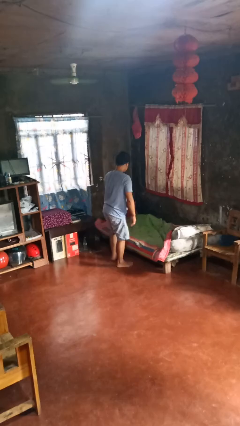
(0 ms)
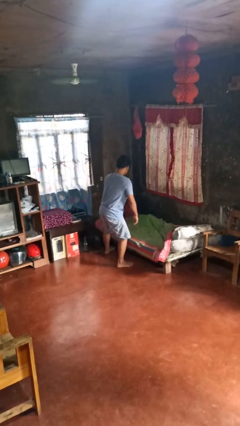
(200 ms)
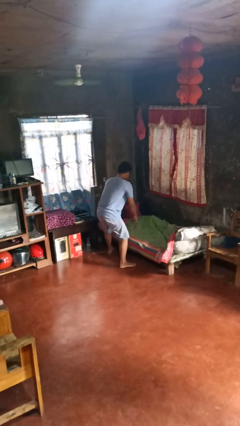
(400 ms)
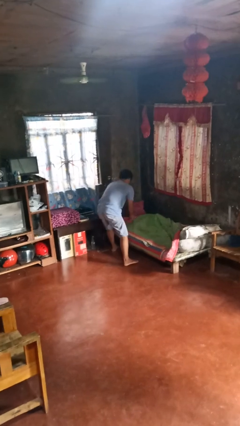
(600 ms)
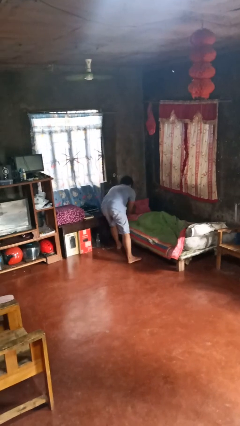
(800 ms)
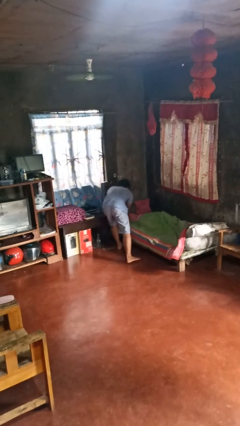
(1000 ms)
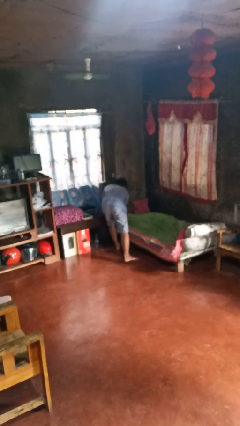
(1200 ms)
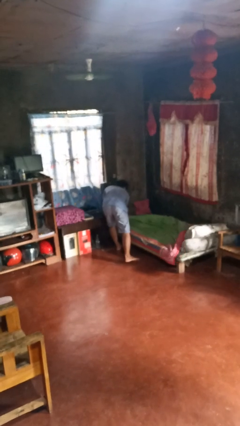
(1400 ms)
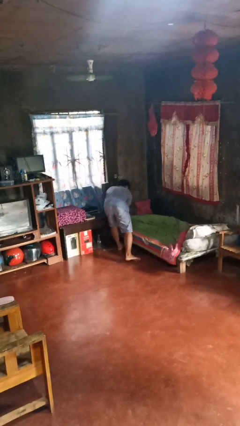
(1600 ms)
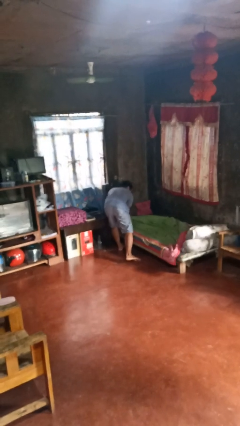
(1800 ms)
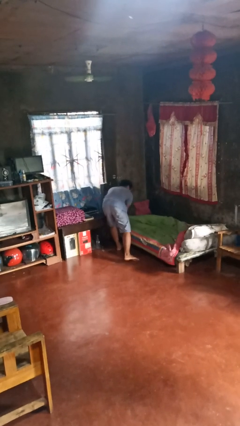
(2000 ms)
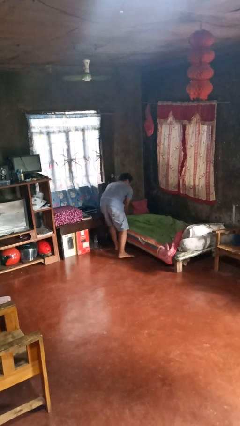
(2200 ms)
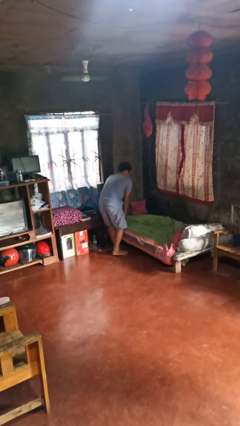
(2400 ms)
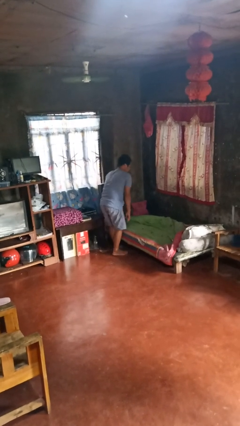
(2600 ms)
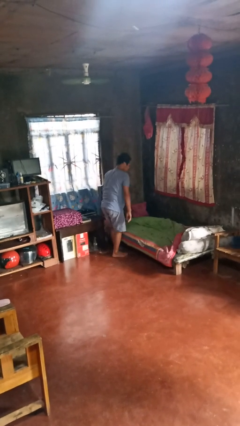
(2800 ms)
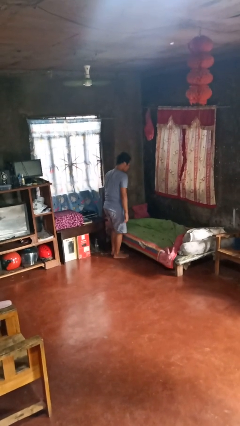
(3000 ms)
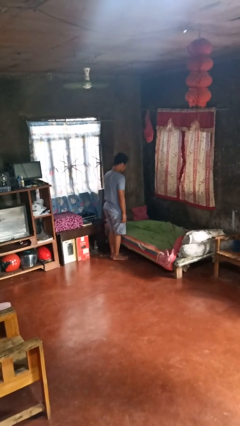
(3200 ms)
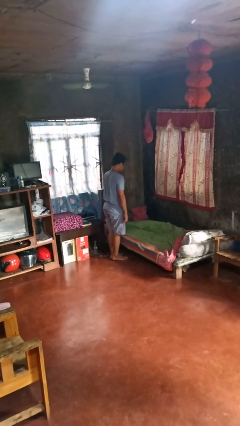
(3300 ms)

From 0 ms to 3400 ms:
person makes bed

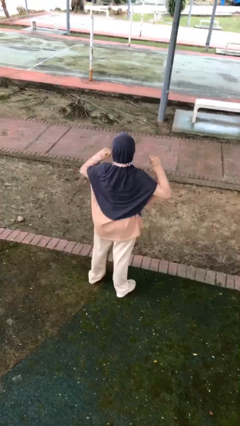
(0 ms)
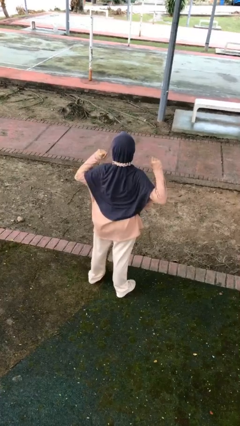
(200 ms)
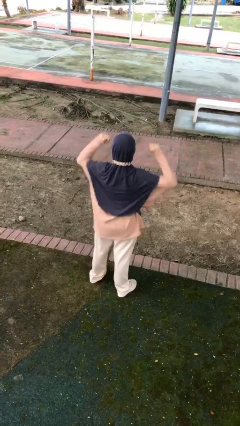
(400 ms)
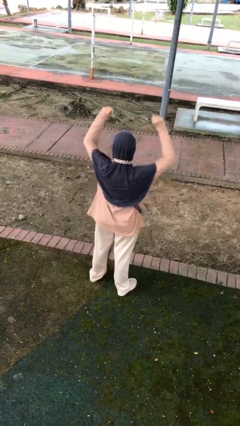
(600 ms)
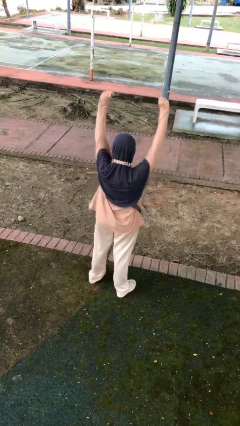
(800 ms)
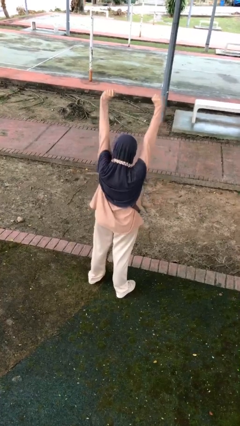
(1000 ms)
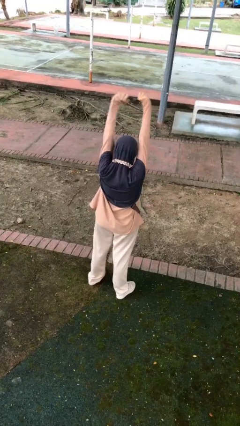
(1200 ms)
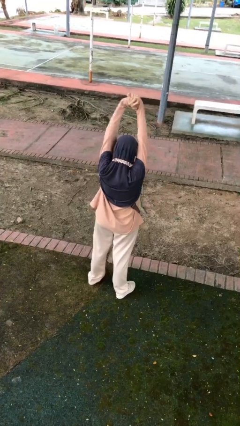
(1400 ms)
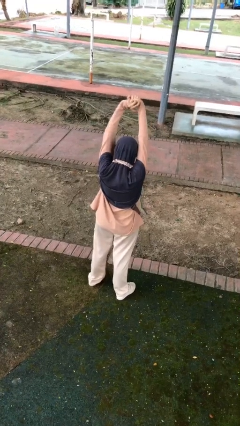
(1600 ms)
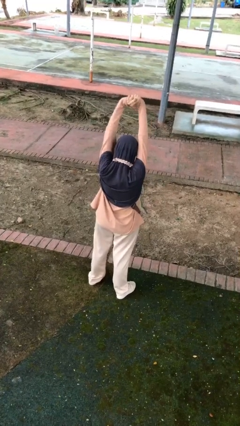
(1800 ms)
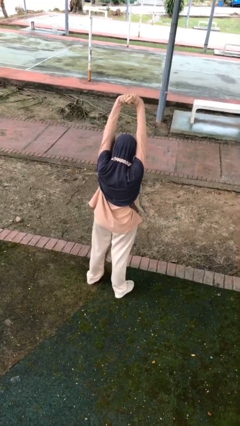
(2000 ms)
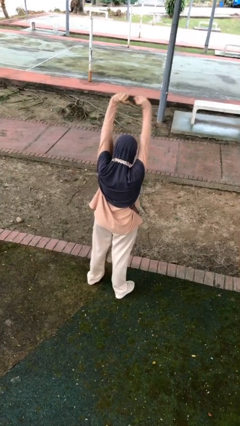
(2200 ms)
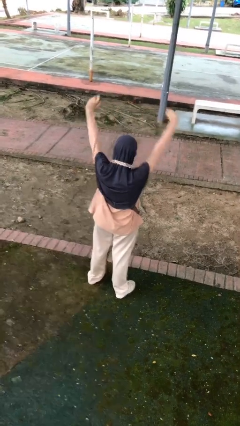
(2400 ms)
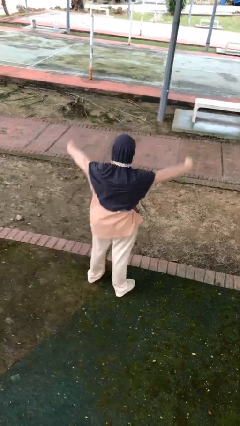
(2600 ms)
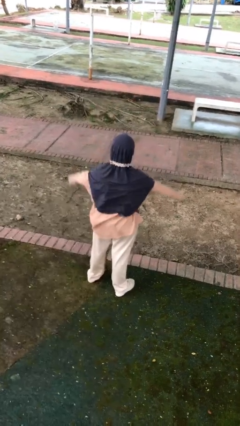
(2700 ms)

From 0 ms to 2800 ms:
person stretches arms over head

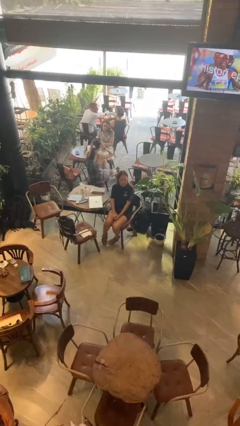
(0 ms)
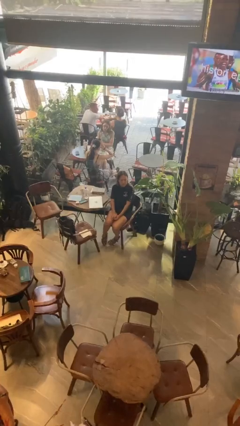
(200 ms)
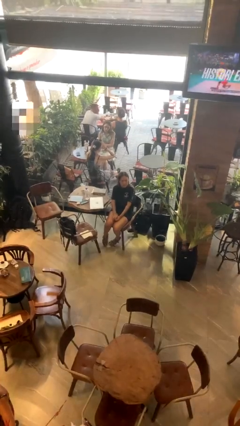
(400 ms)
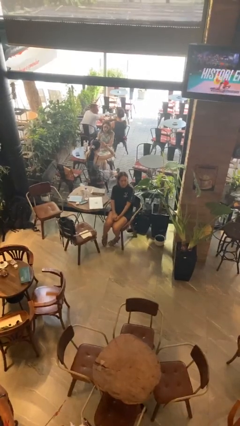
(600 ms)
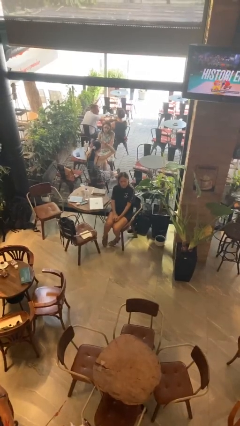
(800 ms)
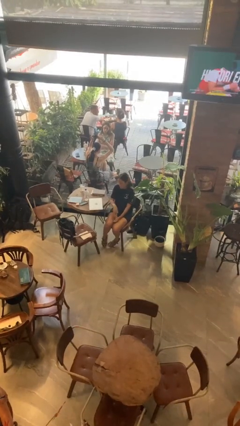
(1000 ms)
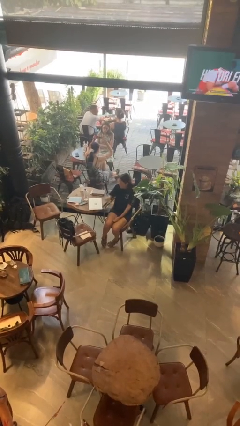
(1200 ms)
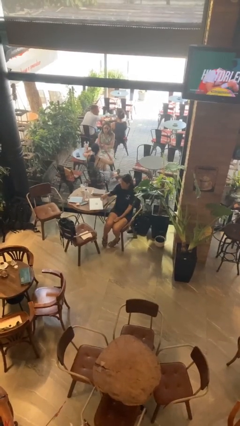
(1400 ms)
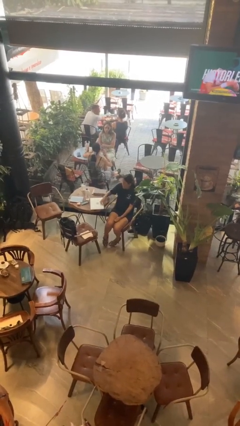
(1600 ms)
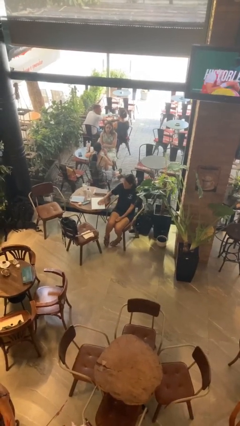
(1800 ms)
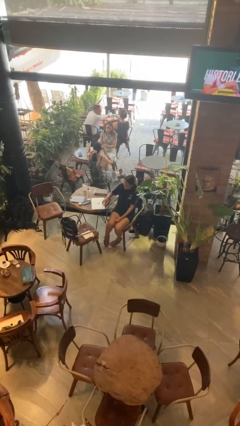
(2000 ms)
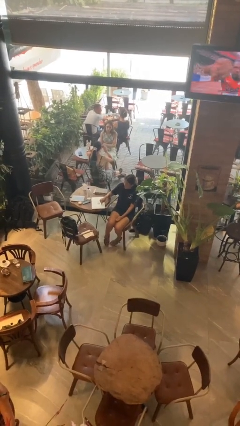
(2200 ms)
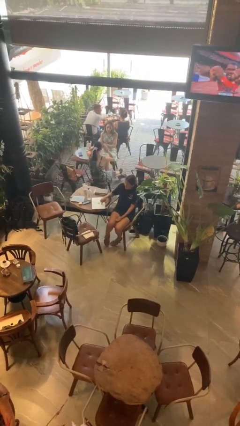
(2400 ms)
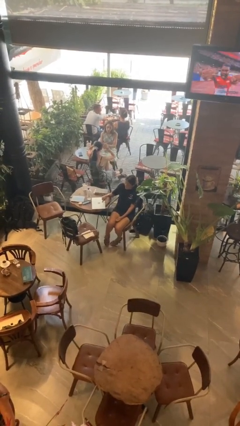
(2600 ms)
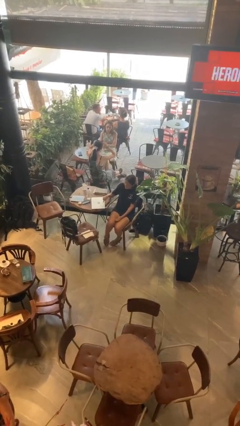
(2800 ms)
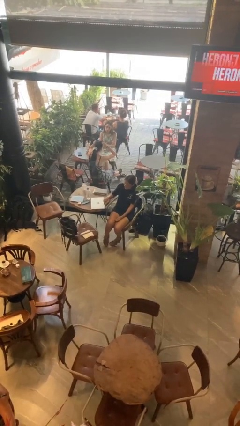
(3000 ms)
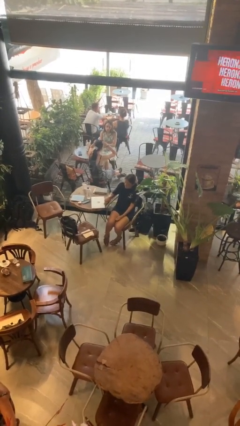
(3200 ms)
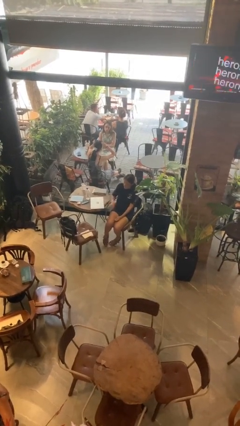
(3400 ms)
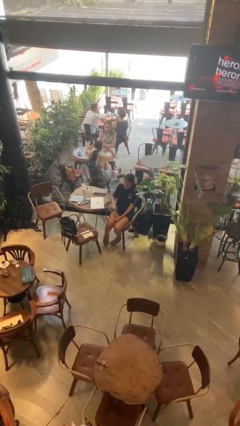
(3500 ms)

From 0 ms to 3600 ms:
person taps object with finger

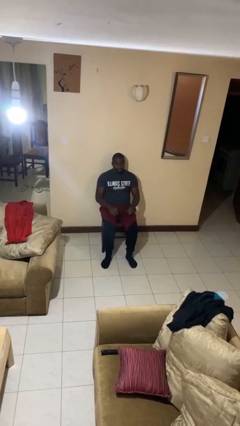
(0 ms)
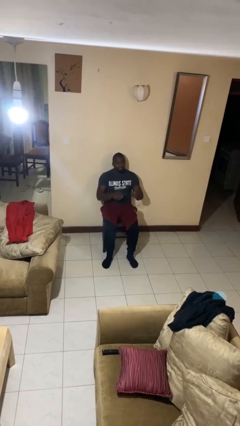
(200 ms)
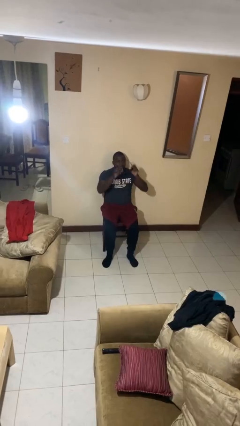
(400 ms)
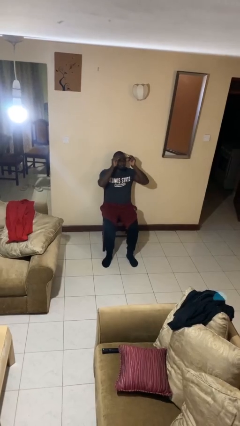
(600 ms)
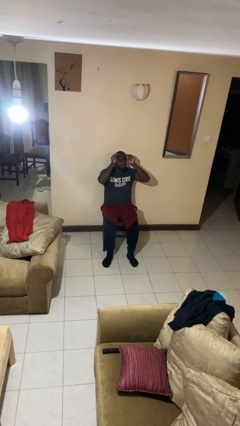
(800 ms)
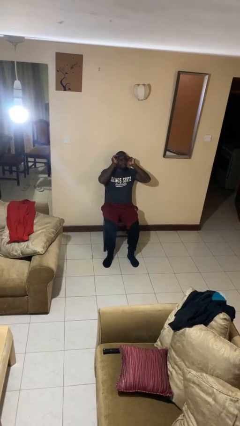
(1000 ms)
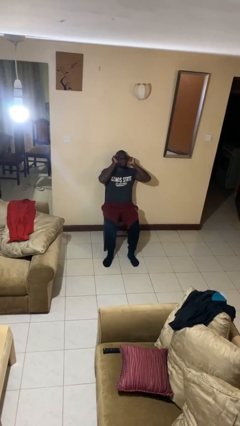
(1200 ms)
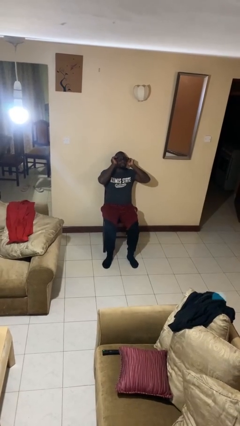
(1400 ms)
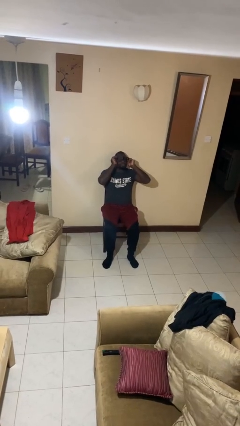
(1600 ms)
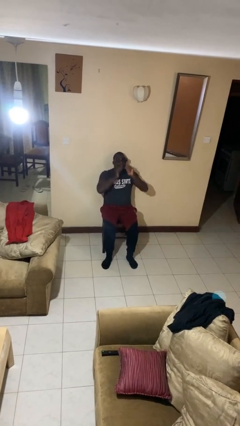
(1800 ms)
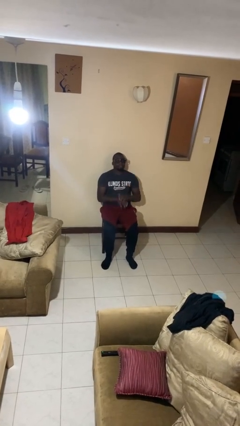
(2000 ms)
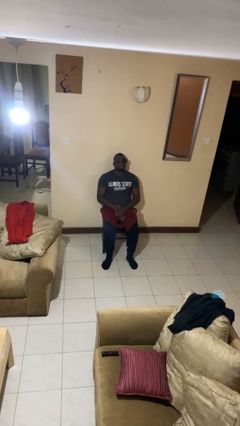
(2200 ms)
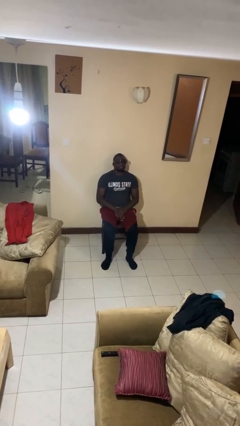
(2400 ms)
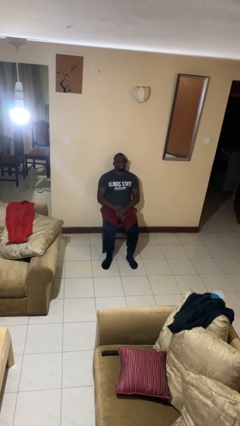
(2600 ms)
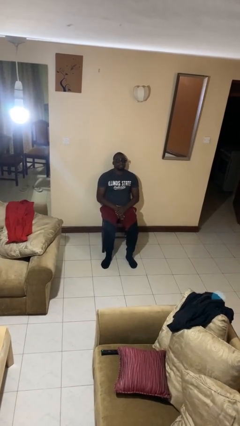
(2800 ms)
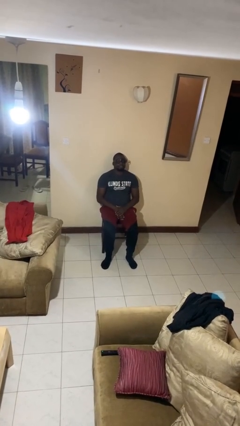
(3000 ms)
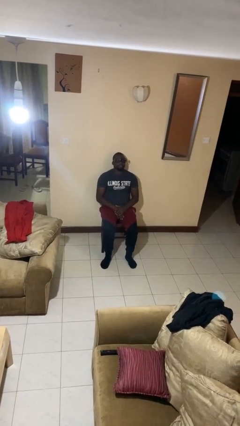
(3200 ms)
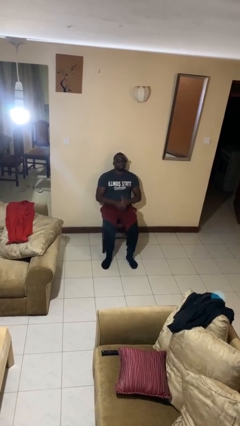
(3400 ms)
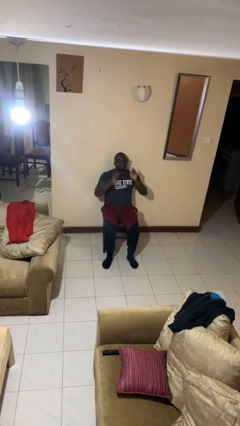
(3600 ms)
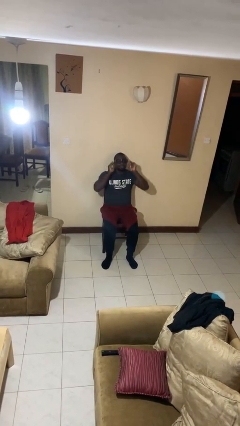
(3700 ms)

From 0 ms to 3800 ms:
person puts on glasses

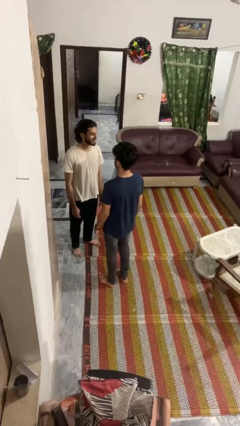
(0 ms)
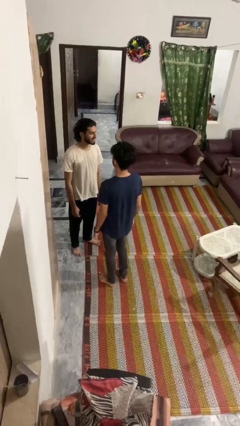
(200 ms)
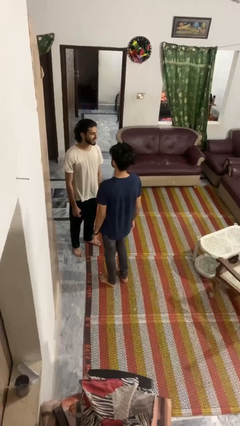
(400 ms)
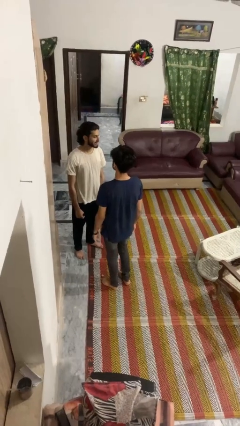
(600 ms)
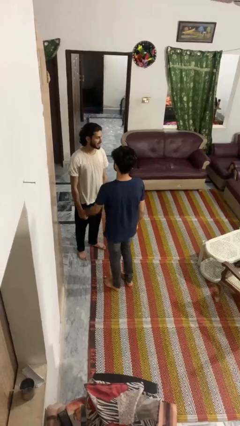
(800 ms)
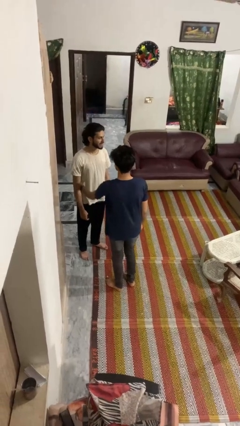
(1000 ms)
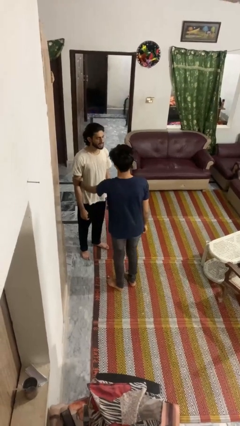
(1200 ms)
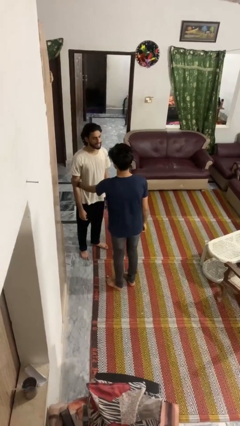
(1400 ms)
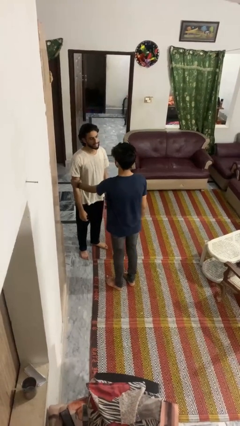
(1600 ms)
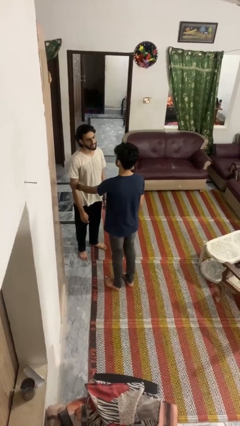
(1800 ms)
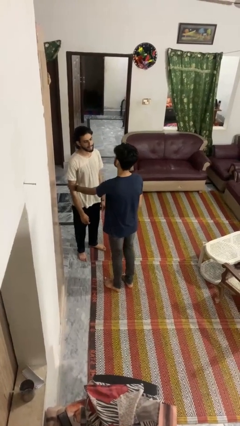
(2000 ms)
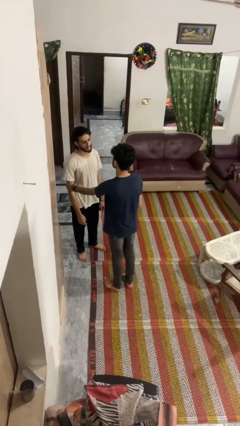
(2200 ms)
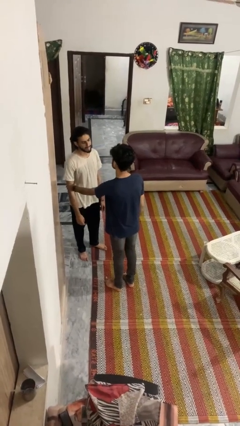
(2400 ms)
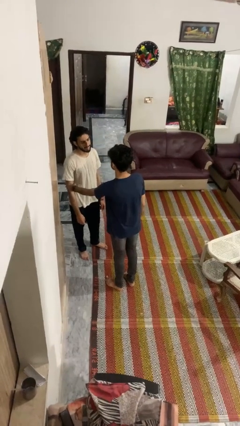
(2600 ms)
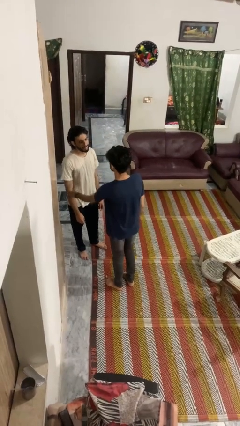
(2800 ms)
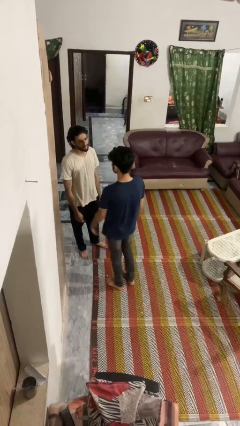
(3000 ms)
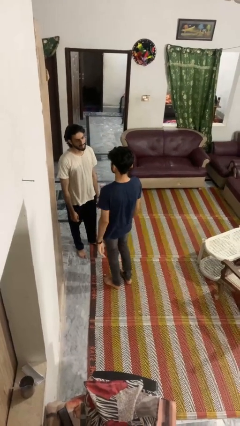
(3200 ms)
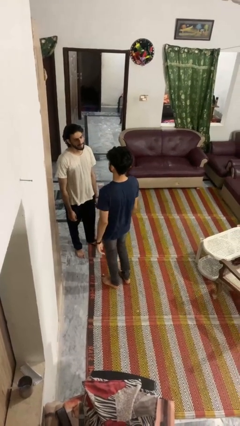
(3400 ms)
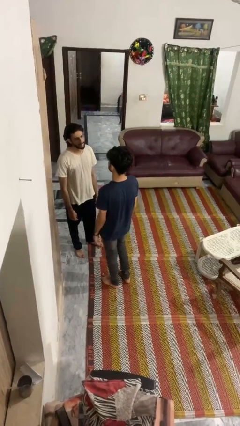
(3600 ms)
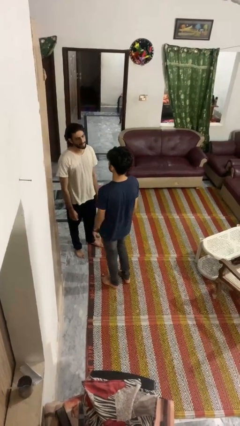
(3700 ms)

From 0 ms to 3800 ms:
person grabs person by bicep
